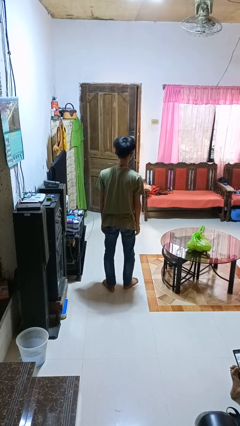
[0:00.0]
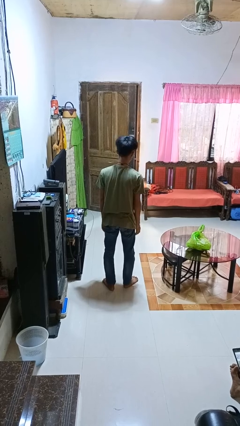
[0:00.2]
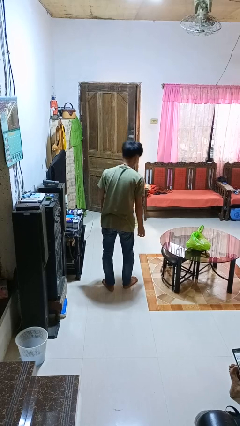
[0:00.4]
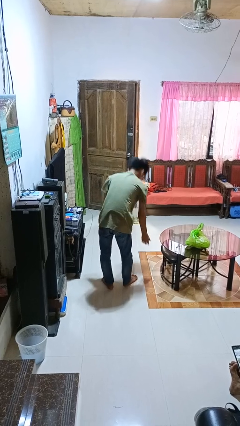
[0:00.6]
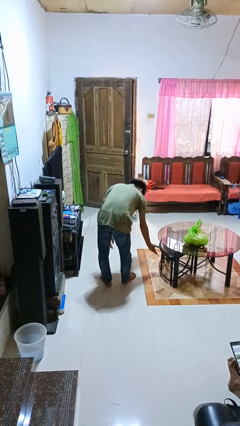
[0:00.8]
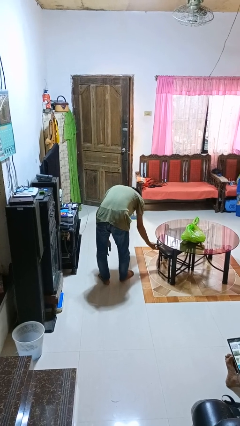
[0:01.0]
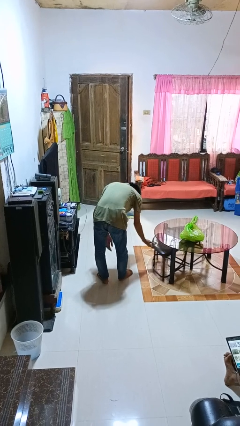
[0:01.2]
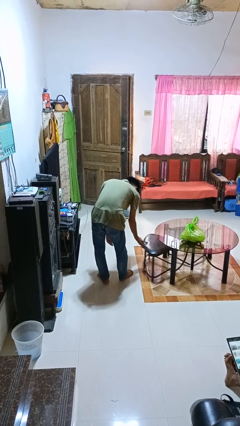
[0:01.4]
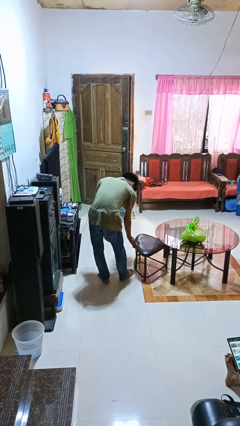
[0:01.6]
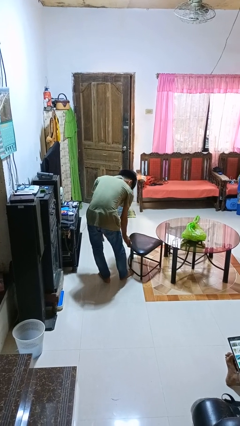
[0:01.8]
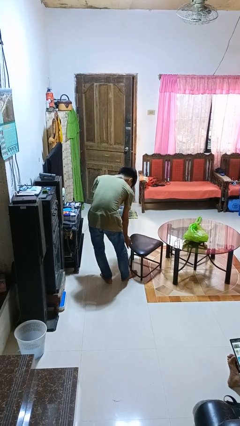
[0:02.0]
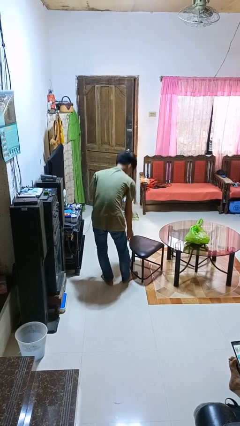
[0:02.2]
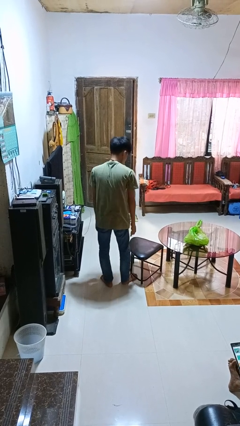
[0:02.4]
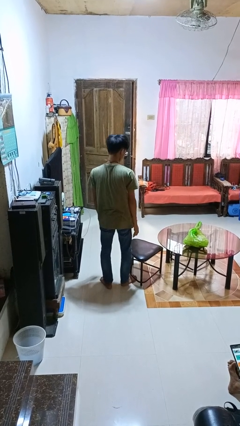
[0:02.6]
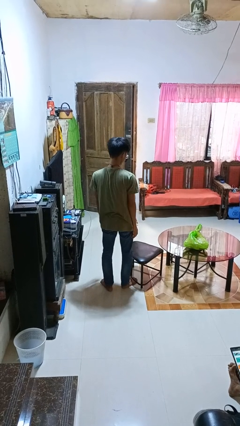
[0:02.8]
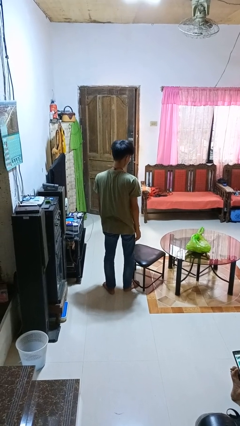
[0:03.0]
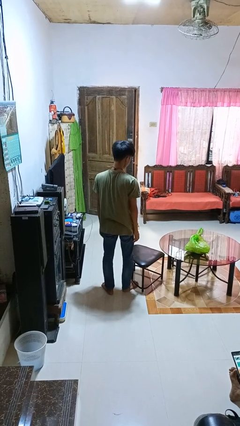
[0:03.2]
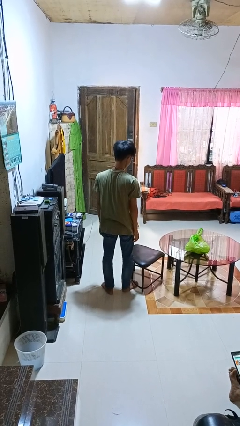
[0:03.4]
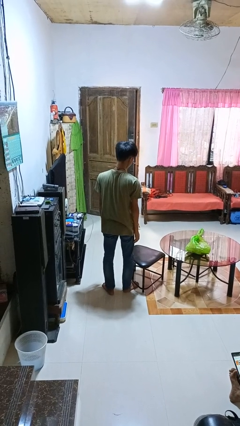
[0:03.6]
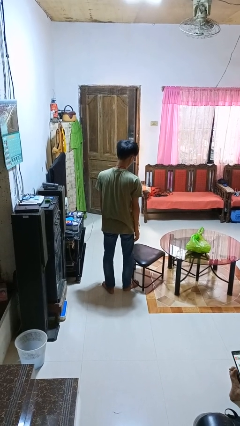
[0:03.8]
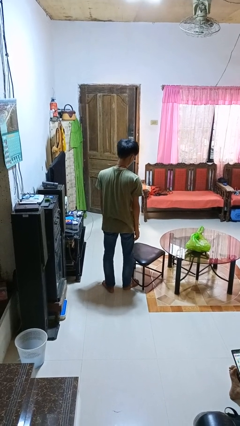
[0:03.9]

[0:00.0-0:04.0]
person pulls out chair

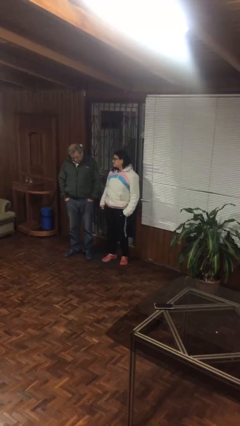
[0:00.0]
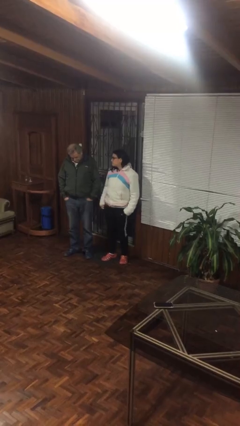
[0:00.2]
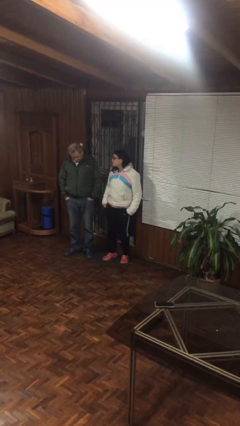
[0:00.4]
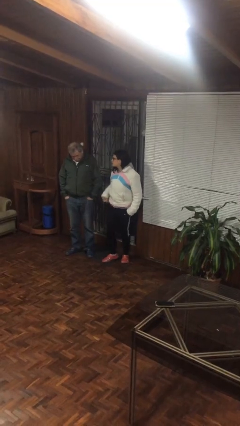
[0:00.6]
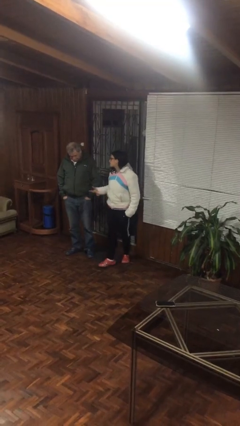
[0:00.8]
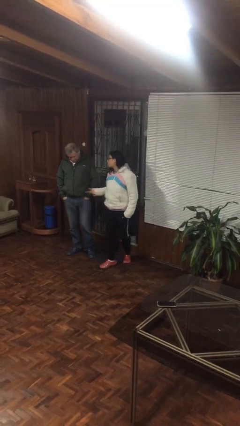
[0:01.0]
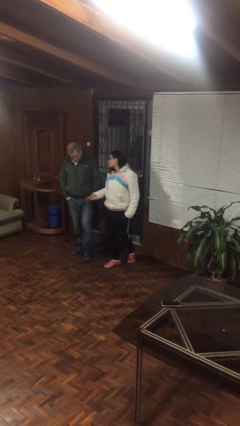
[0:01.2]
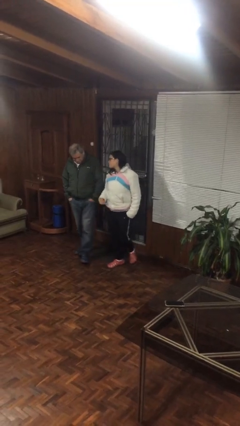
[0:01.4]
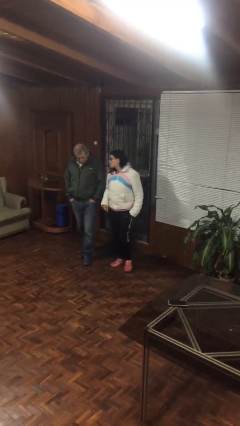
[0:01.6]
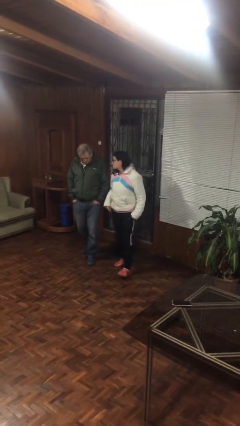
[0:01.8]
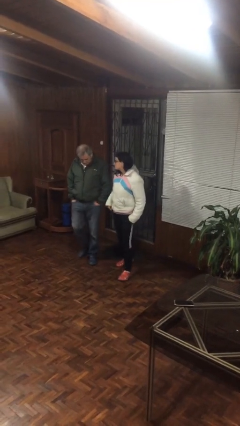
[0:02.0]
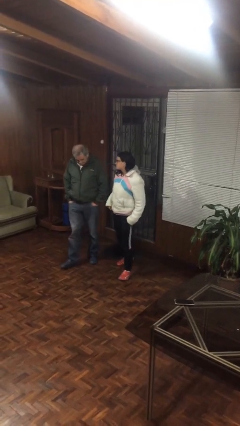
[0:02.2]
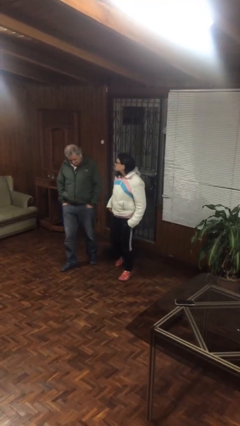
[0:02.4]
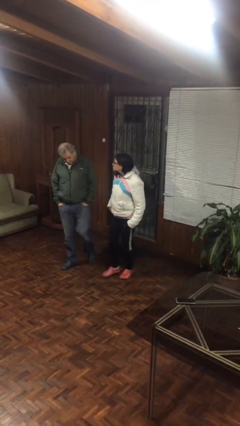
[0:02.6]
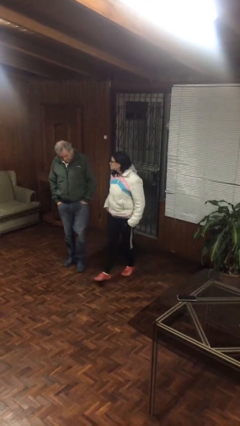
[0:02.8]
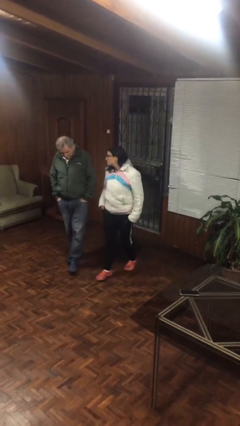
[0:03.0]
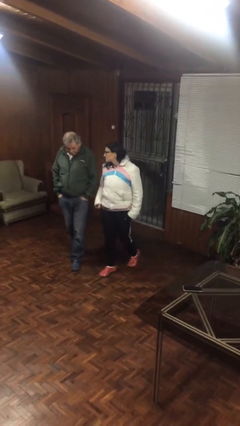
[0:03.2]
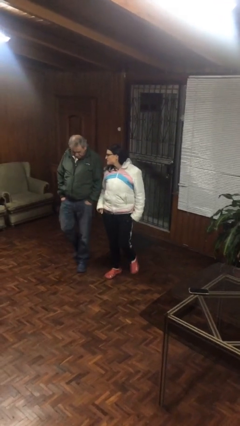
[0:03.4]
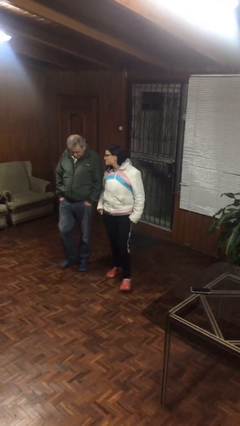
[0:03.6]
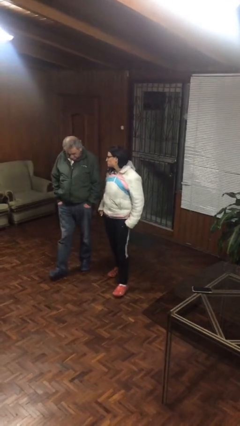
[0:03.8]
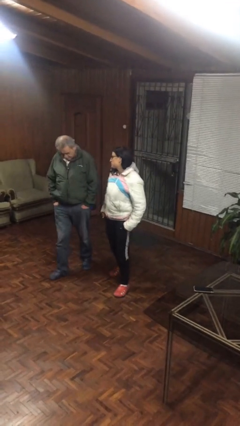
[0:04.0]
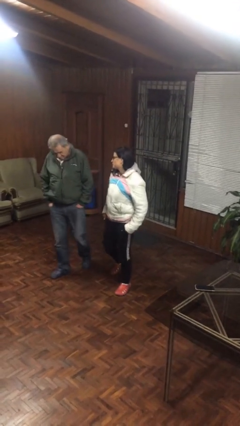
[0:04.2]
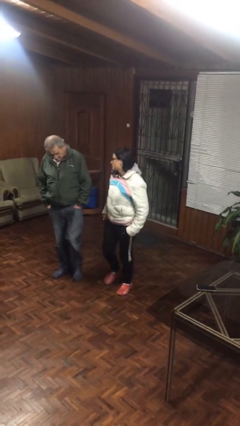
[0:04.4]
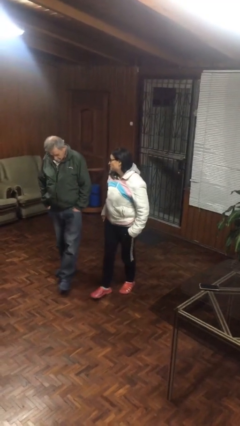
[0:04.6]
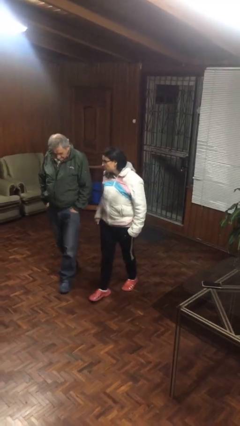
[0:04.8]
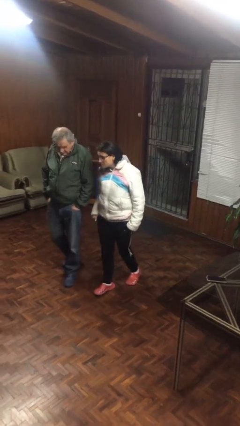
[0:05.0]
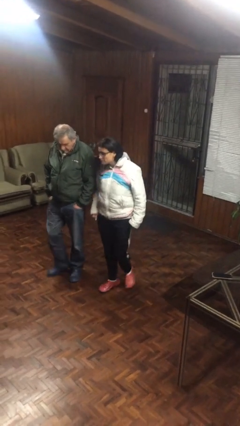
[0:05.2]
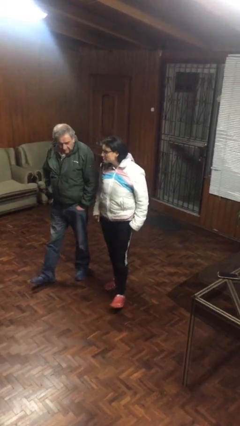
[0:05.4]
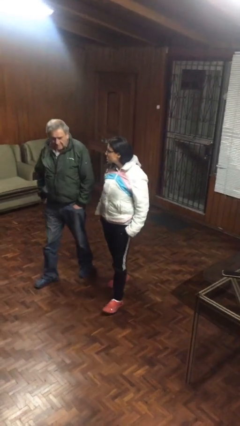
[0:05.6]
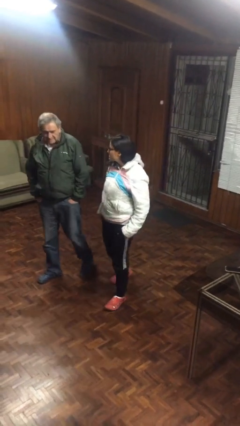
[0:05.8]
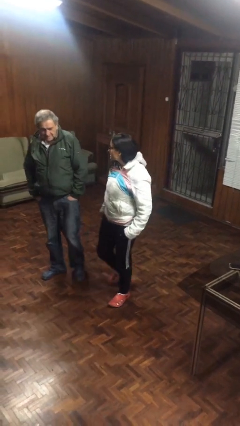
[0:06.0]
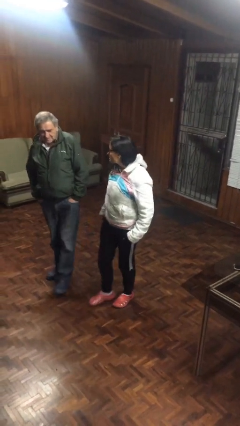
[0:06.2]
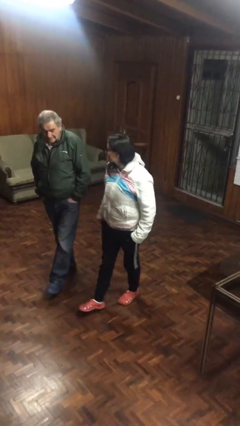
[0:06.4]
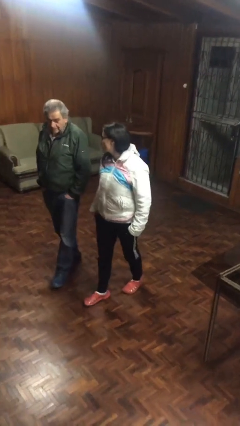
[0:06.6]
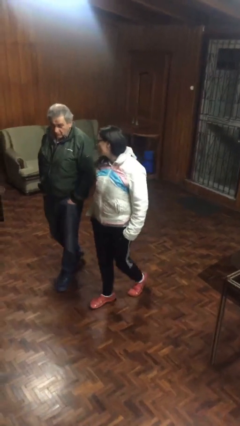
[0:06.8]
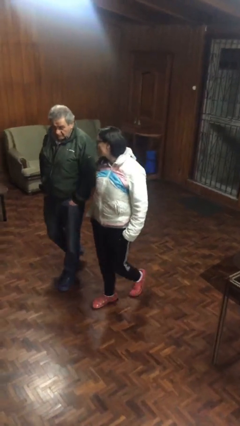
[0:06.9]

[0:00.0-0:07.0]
person talks to person

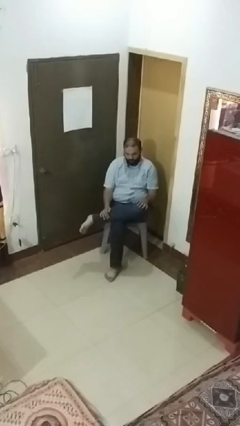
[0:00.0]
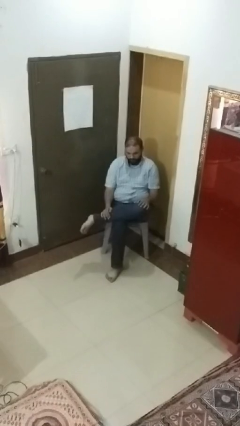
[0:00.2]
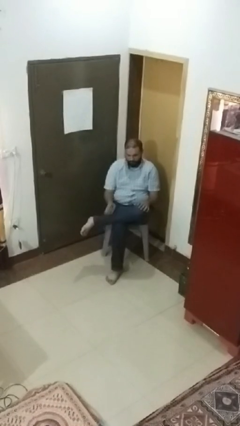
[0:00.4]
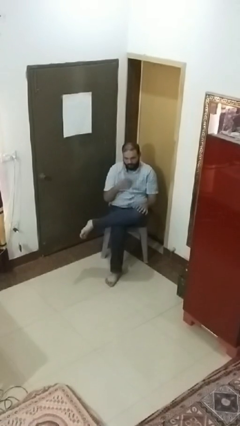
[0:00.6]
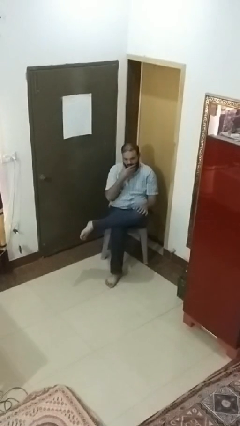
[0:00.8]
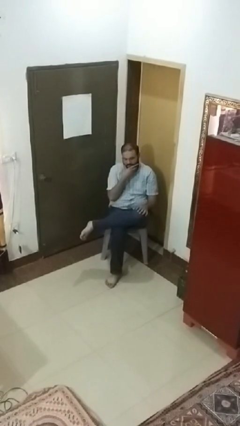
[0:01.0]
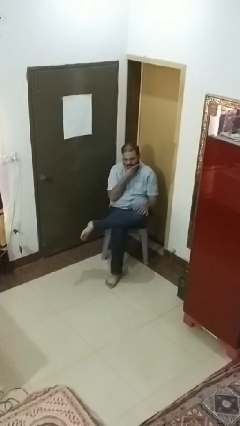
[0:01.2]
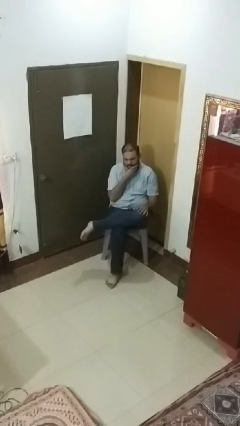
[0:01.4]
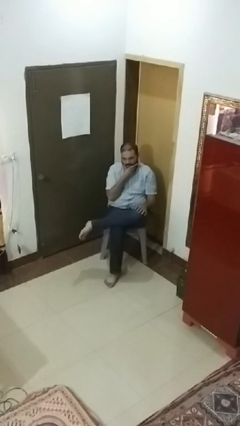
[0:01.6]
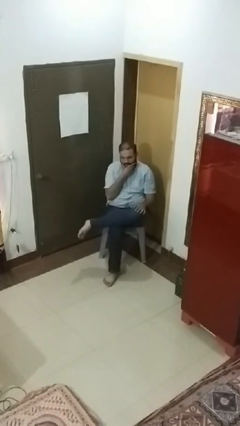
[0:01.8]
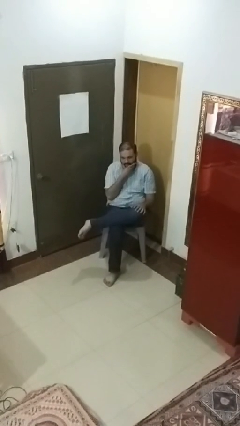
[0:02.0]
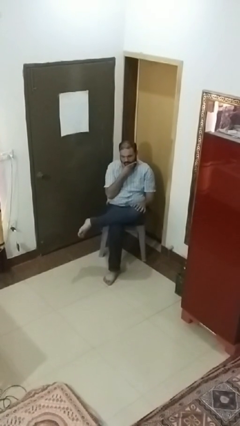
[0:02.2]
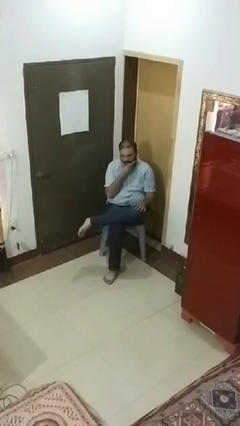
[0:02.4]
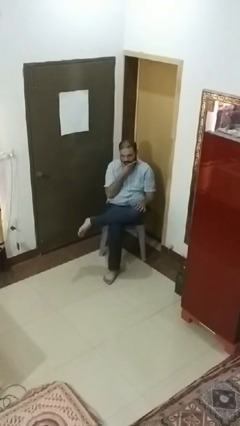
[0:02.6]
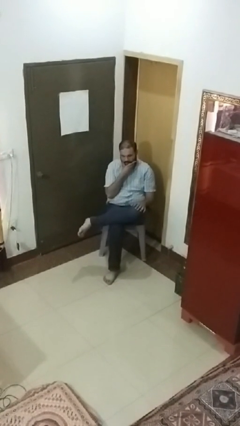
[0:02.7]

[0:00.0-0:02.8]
person strokes chin

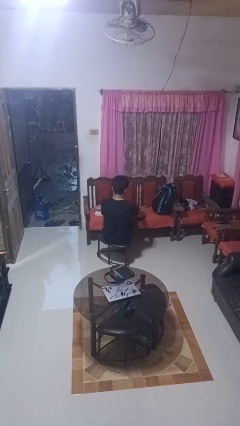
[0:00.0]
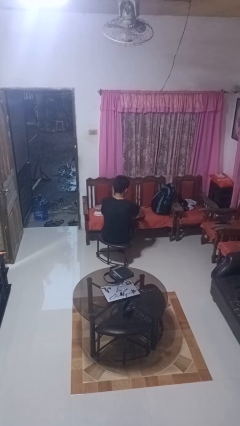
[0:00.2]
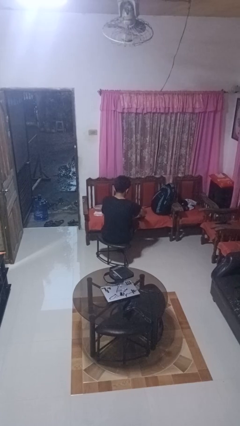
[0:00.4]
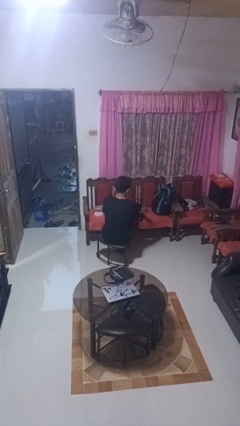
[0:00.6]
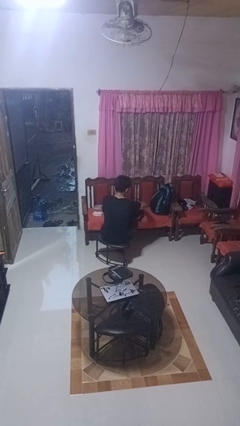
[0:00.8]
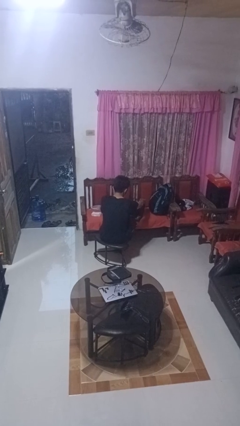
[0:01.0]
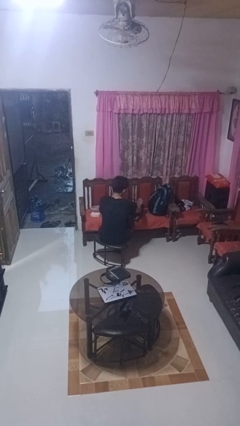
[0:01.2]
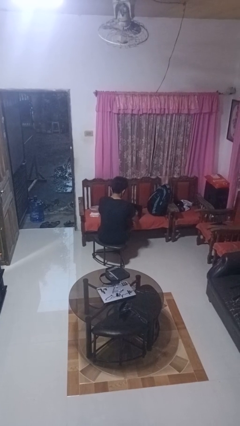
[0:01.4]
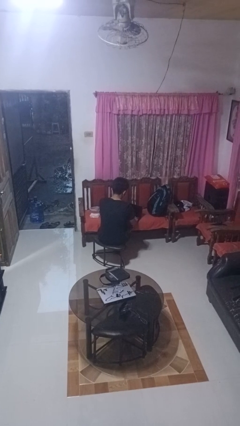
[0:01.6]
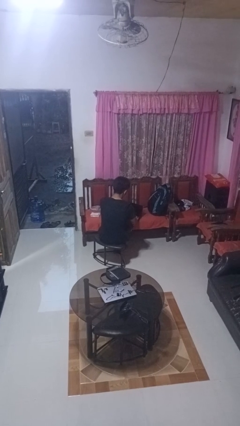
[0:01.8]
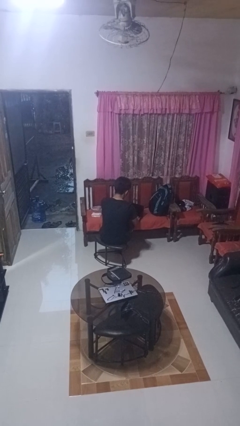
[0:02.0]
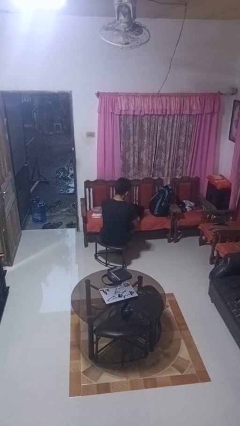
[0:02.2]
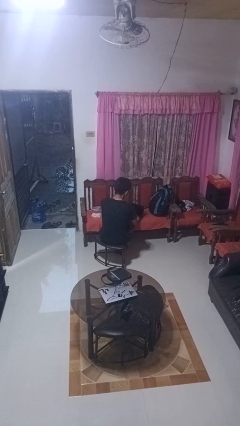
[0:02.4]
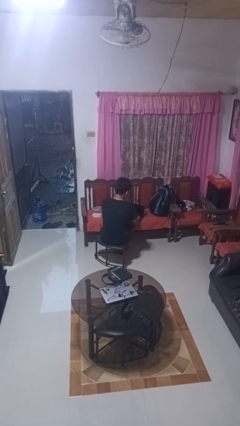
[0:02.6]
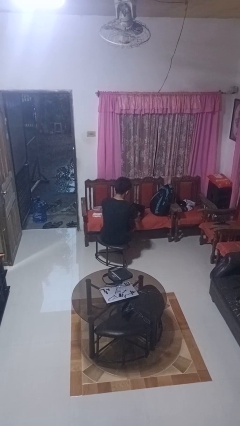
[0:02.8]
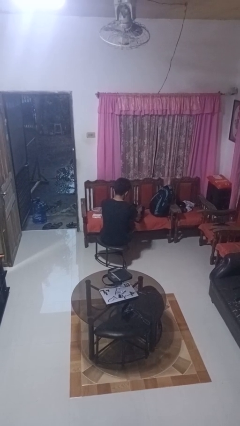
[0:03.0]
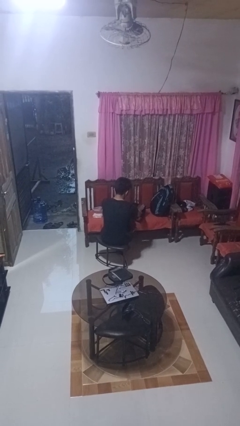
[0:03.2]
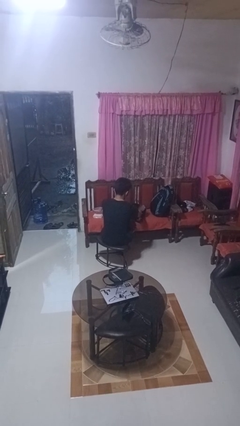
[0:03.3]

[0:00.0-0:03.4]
person opens laptop

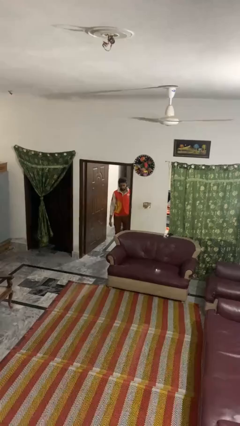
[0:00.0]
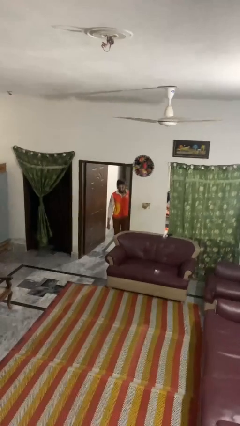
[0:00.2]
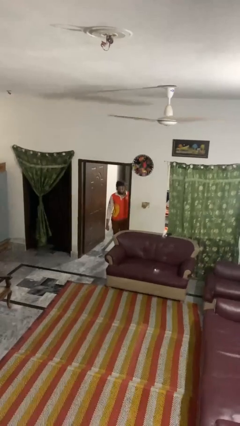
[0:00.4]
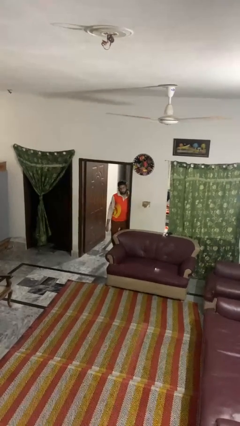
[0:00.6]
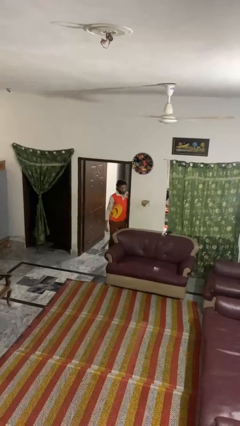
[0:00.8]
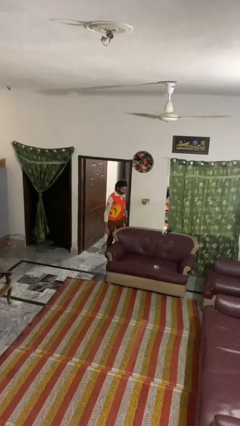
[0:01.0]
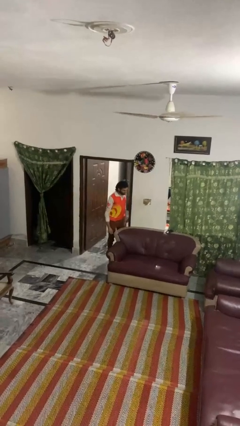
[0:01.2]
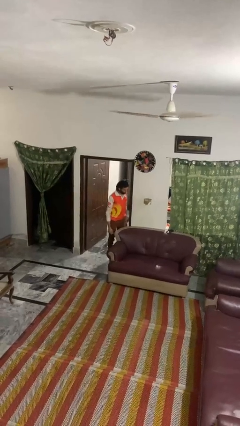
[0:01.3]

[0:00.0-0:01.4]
person bumps into wall
